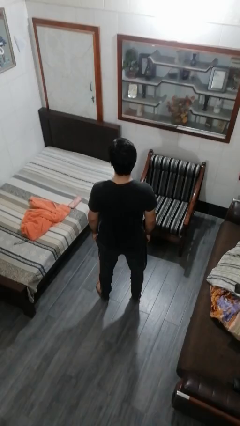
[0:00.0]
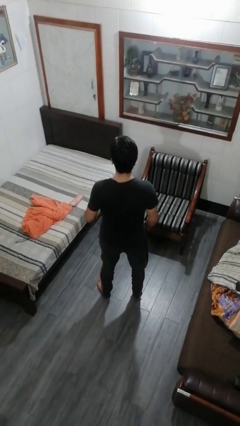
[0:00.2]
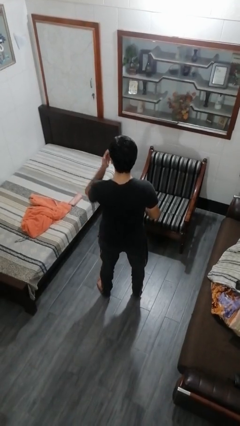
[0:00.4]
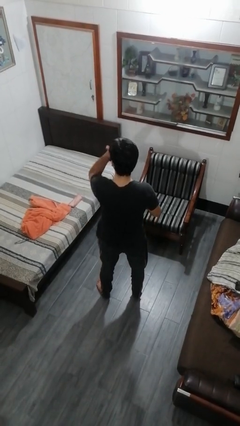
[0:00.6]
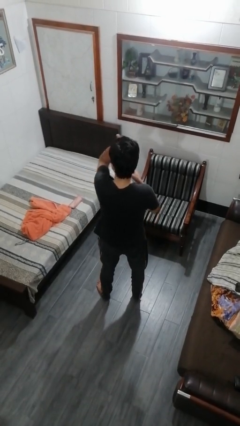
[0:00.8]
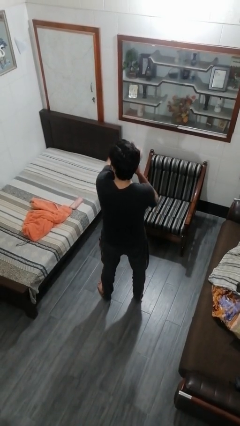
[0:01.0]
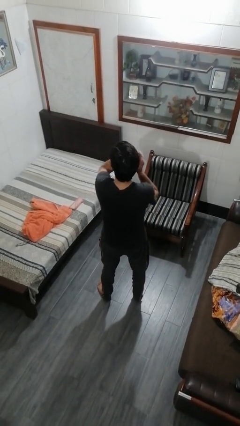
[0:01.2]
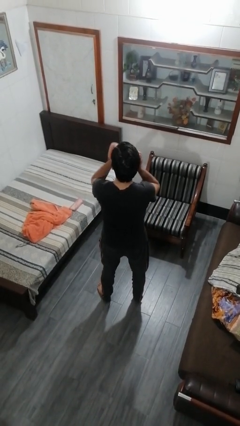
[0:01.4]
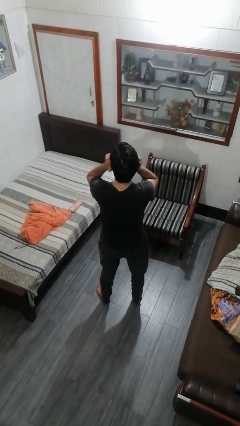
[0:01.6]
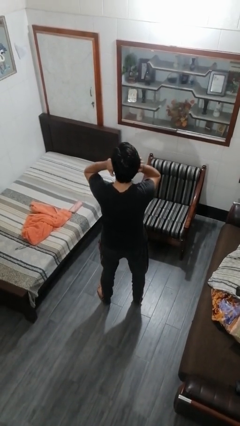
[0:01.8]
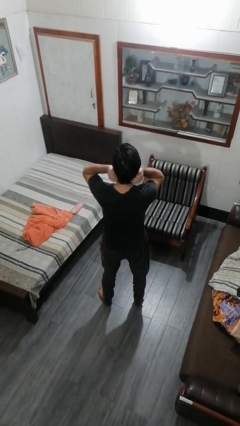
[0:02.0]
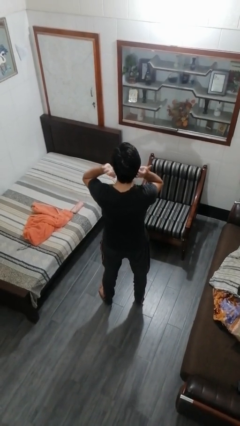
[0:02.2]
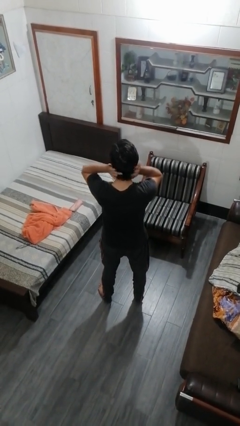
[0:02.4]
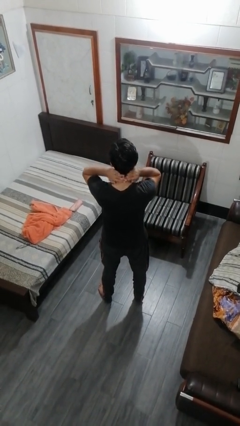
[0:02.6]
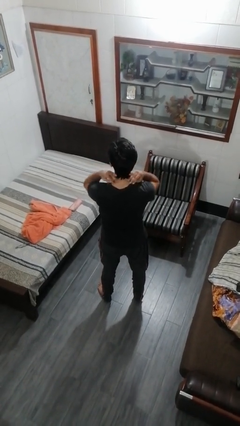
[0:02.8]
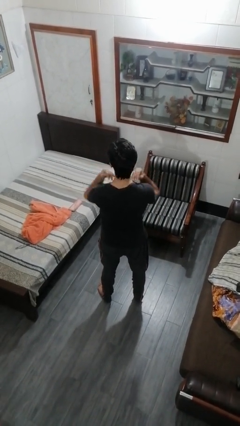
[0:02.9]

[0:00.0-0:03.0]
person strokes hair

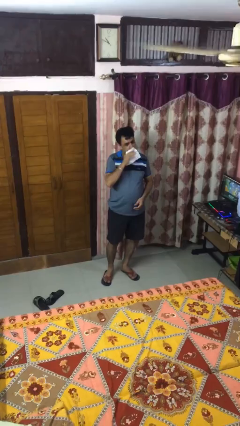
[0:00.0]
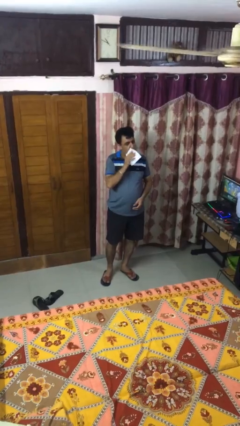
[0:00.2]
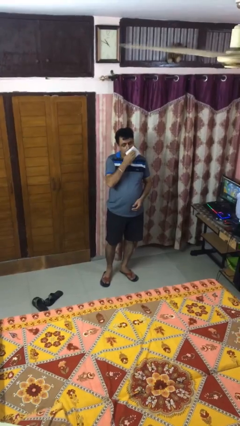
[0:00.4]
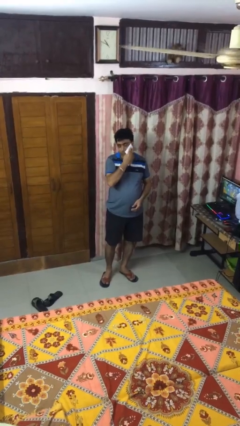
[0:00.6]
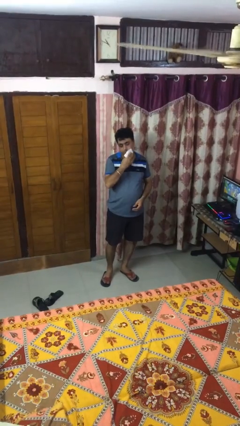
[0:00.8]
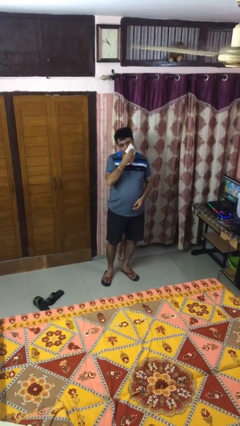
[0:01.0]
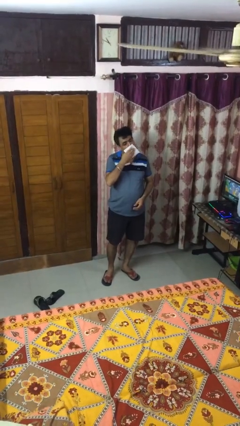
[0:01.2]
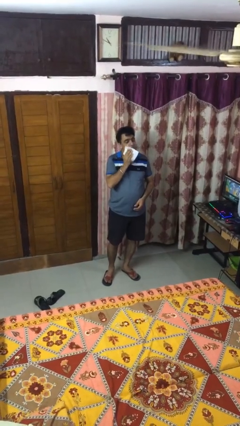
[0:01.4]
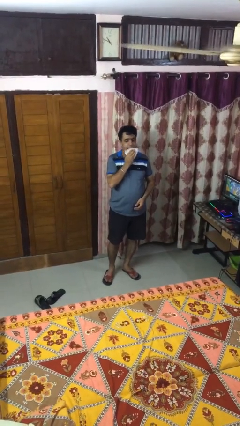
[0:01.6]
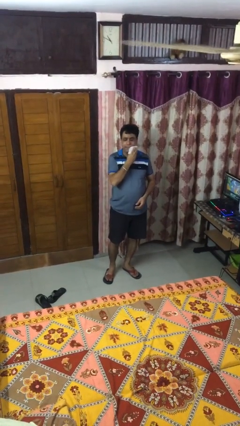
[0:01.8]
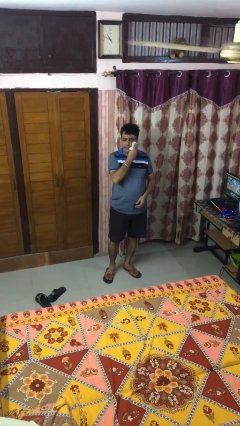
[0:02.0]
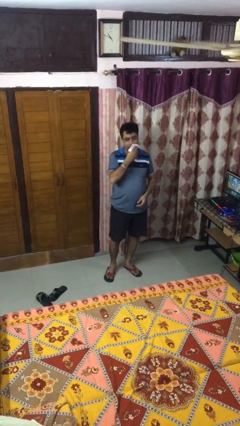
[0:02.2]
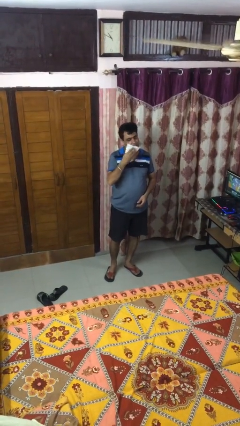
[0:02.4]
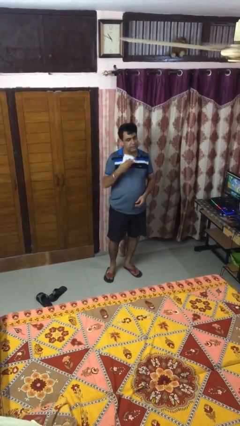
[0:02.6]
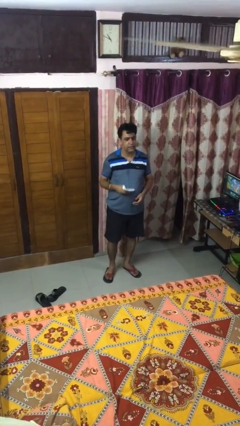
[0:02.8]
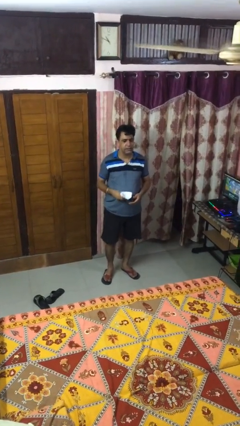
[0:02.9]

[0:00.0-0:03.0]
person wipes mouth with napkin

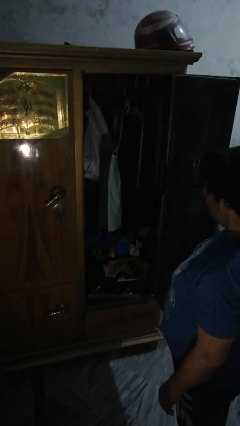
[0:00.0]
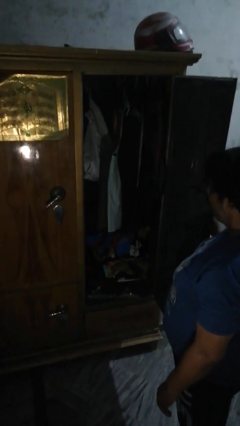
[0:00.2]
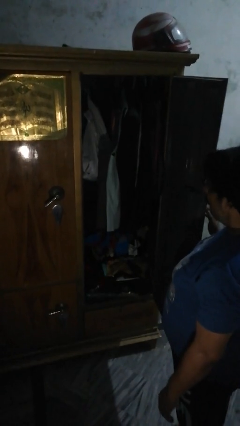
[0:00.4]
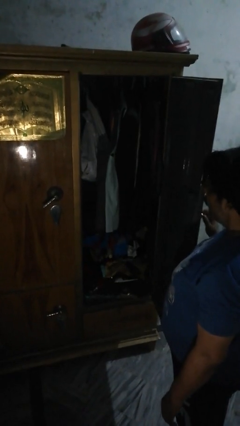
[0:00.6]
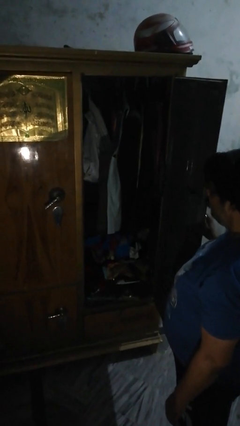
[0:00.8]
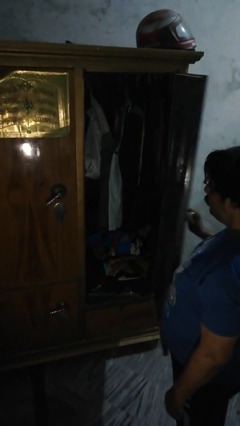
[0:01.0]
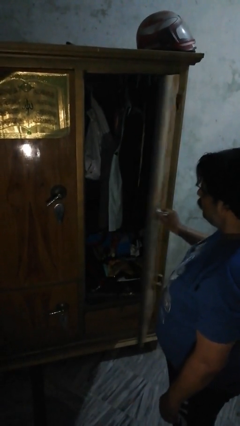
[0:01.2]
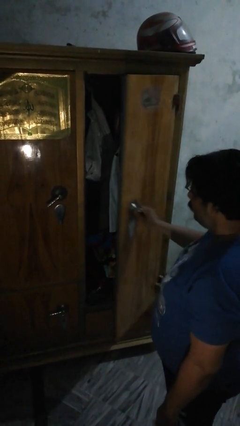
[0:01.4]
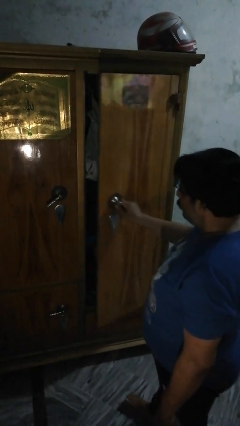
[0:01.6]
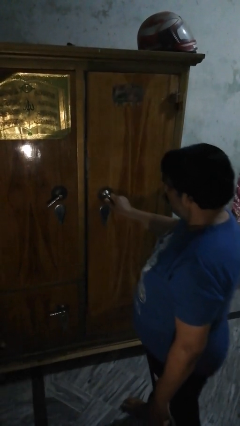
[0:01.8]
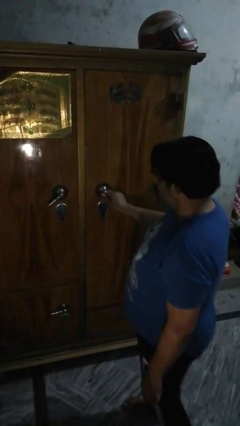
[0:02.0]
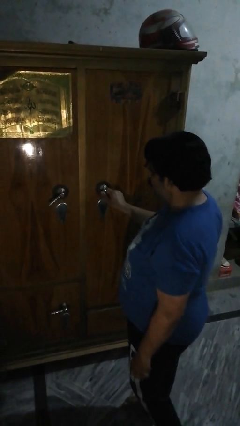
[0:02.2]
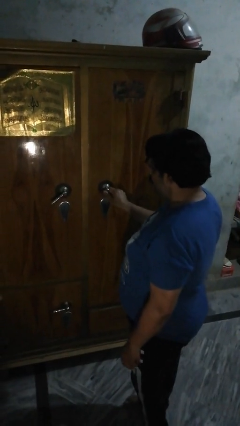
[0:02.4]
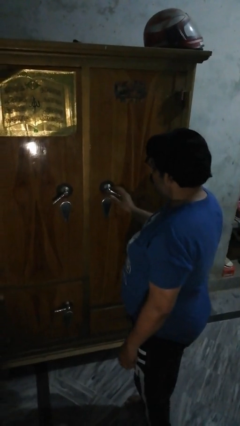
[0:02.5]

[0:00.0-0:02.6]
person closes closet door

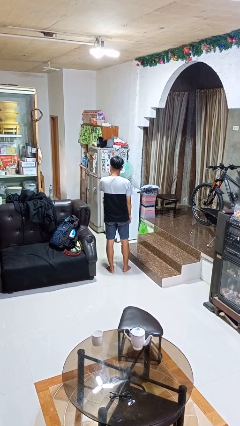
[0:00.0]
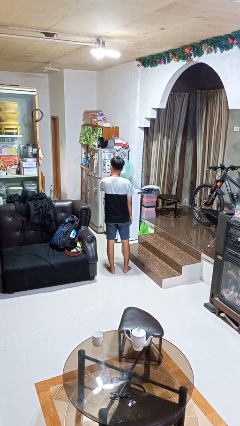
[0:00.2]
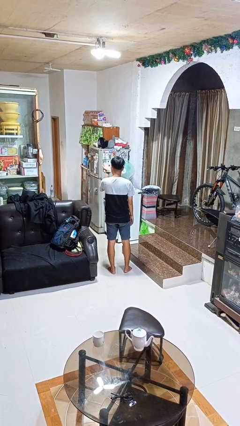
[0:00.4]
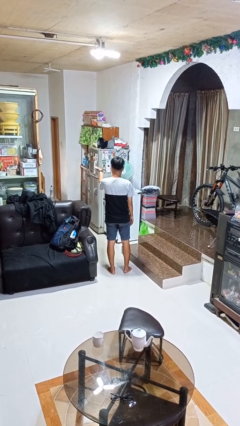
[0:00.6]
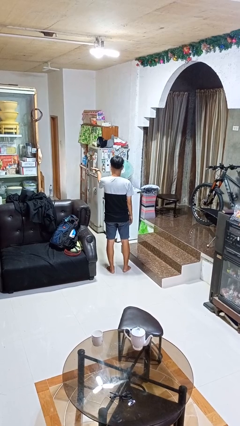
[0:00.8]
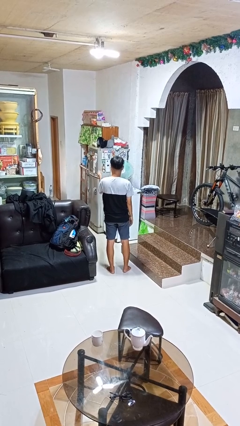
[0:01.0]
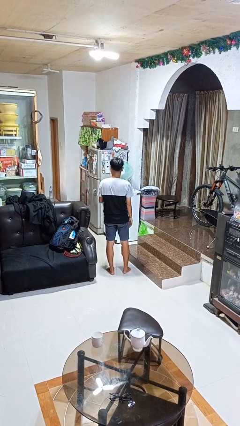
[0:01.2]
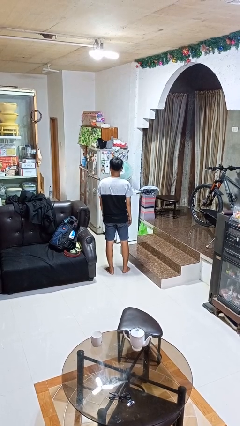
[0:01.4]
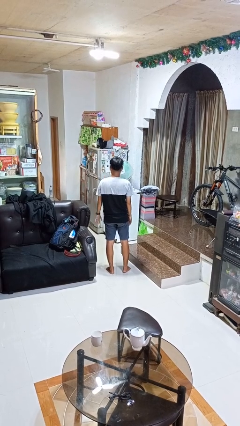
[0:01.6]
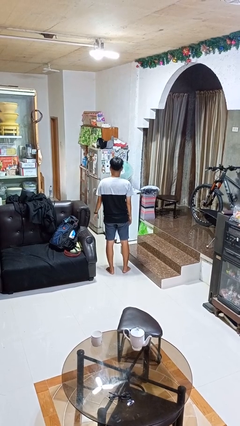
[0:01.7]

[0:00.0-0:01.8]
person gestures blow kiss

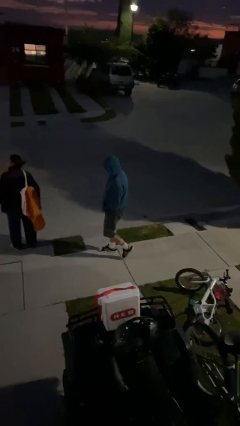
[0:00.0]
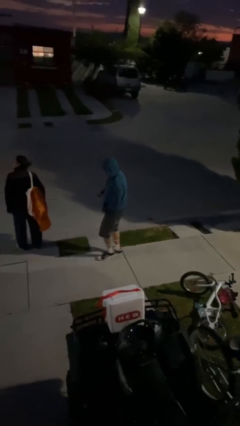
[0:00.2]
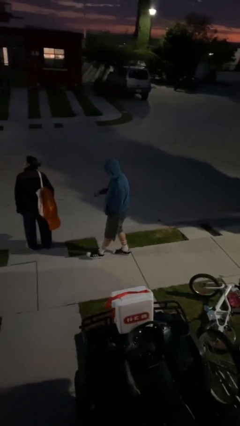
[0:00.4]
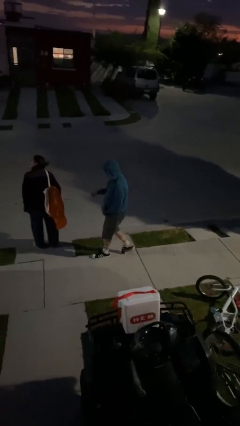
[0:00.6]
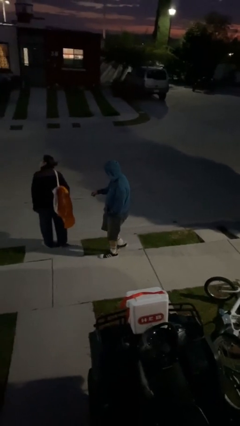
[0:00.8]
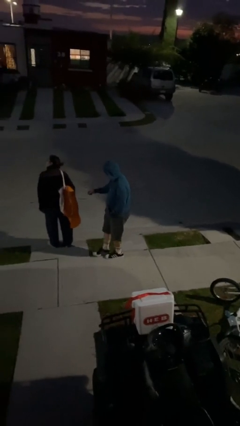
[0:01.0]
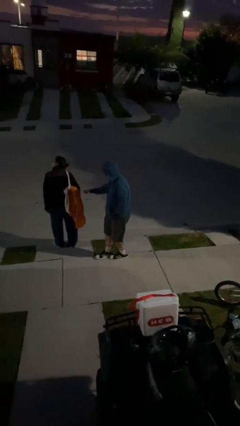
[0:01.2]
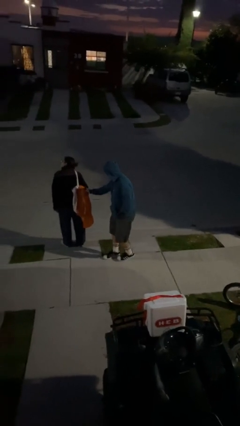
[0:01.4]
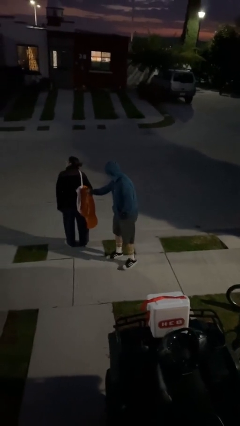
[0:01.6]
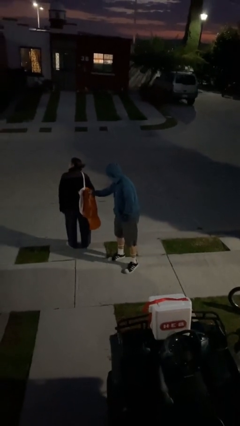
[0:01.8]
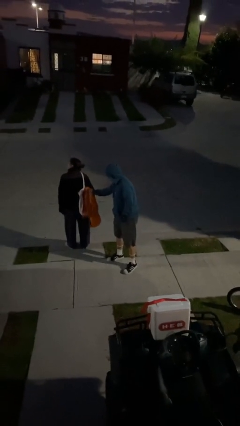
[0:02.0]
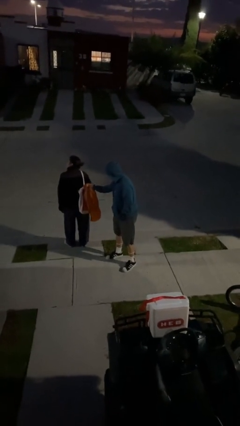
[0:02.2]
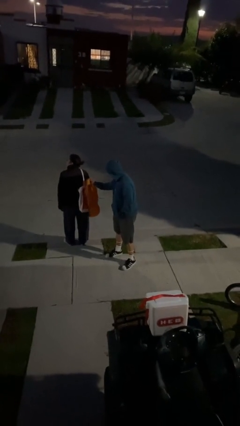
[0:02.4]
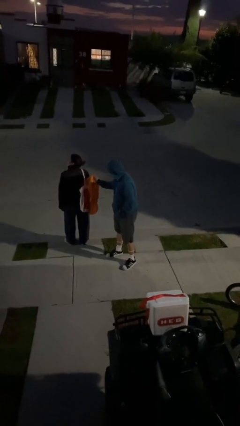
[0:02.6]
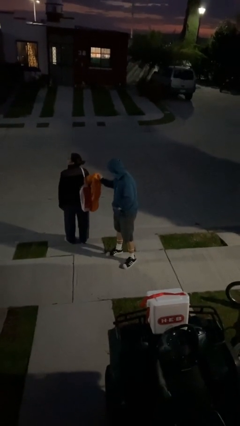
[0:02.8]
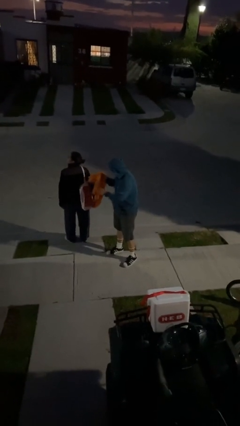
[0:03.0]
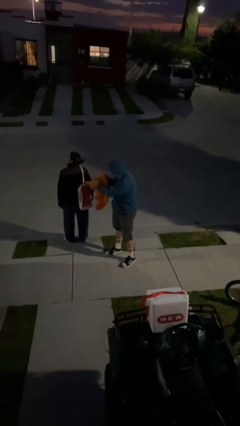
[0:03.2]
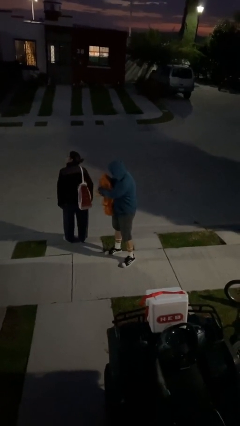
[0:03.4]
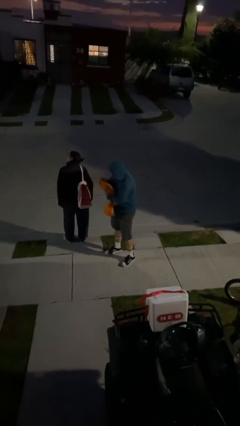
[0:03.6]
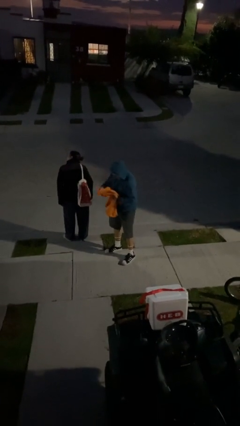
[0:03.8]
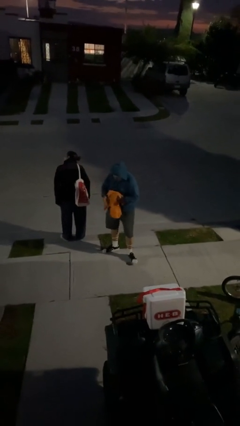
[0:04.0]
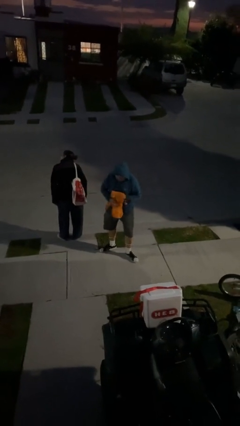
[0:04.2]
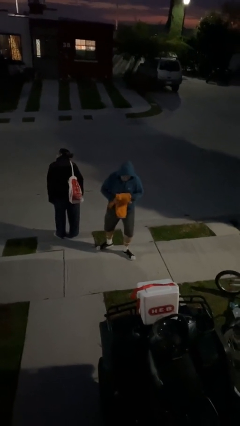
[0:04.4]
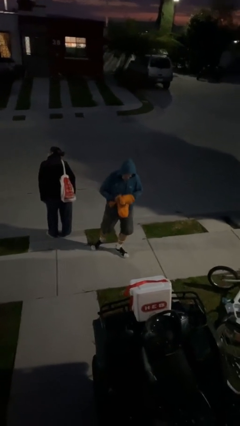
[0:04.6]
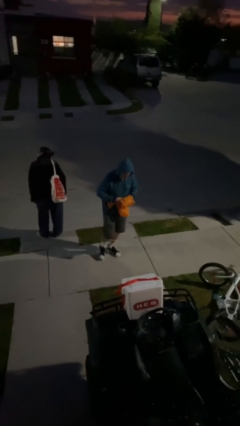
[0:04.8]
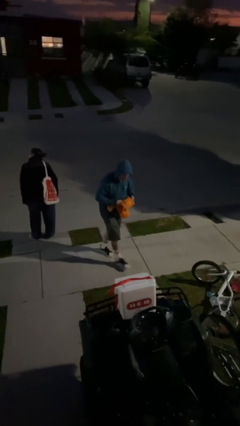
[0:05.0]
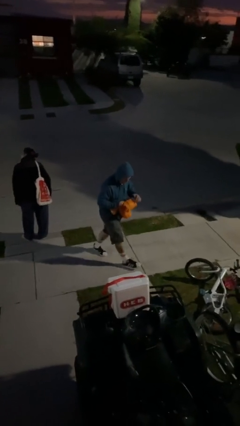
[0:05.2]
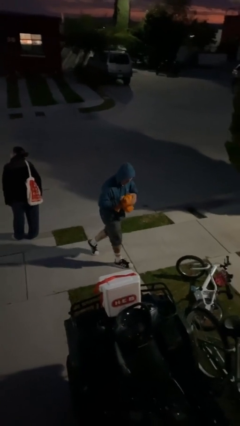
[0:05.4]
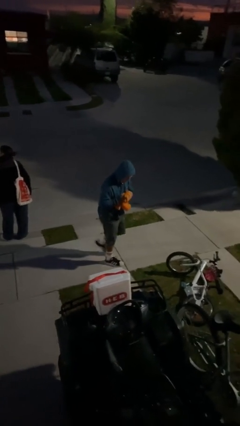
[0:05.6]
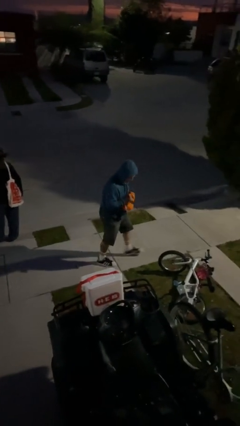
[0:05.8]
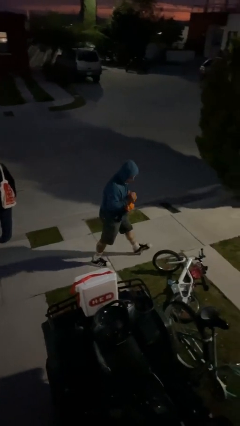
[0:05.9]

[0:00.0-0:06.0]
person steals object from person

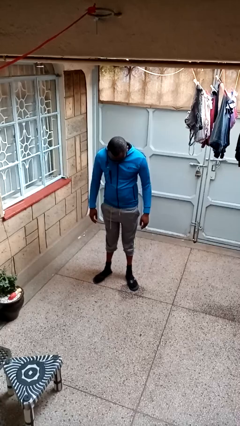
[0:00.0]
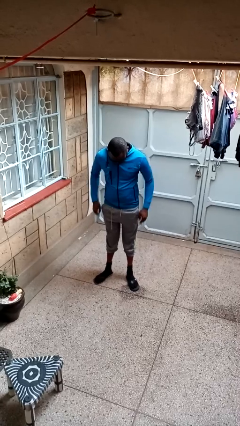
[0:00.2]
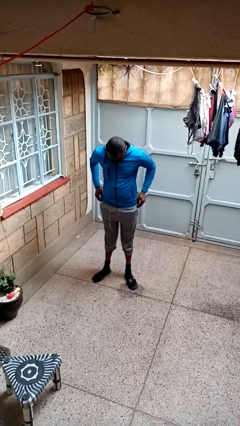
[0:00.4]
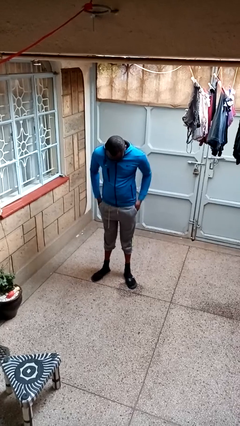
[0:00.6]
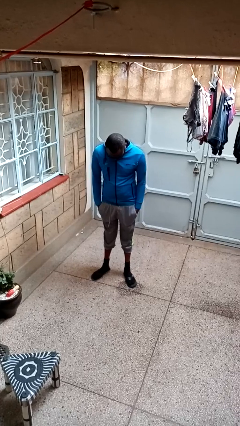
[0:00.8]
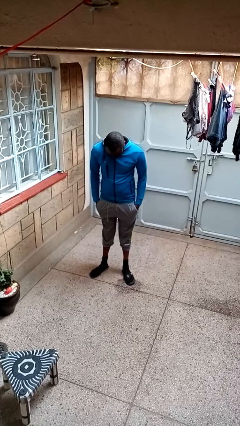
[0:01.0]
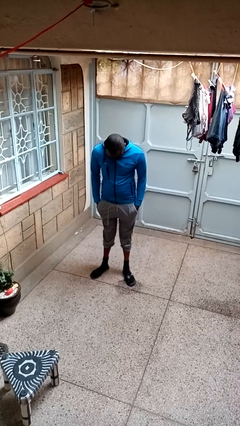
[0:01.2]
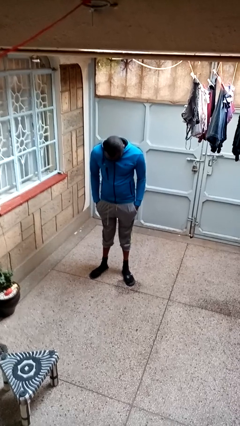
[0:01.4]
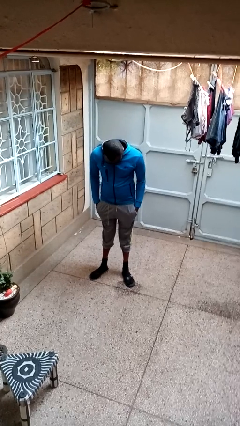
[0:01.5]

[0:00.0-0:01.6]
person puts hands in back pockets
